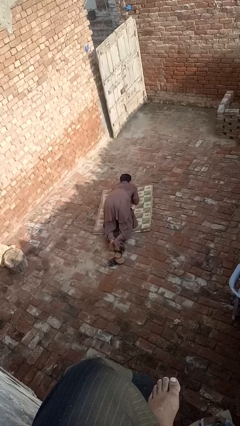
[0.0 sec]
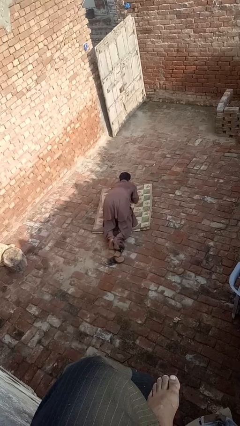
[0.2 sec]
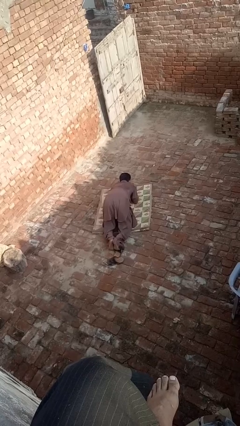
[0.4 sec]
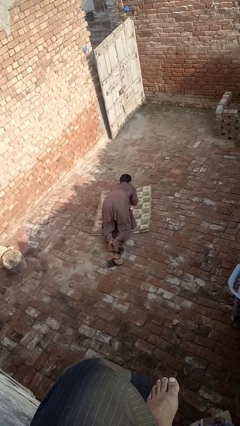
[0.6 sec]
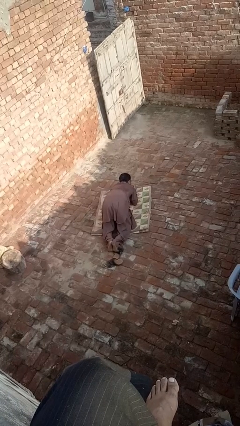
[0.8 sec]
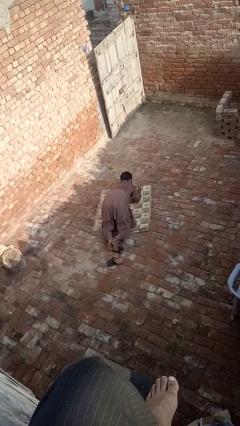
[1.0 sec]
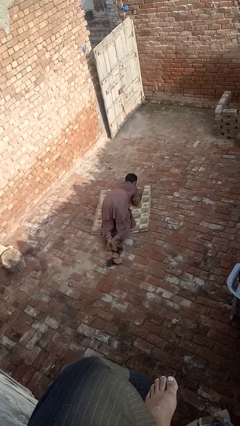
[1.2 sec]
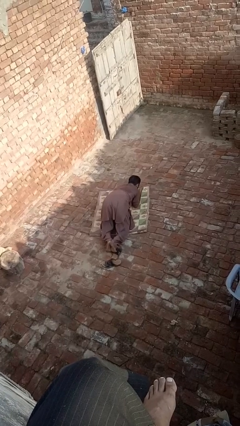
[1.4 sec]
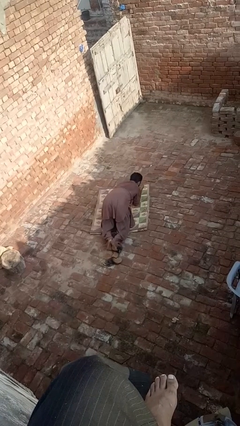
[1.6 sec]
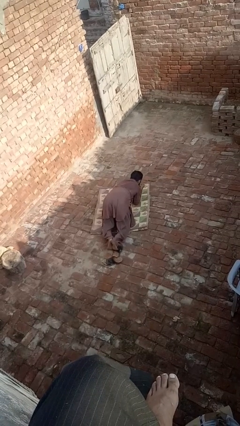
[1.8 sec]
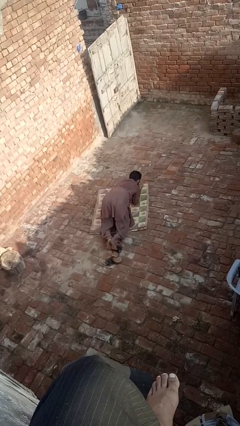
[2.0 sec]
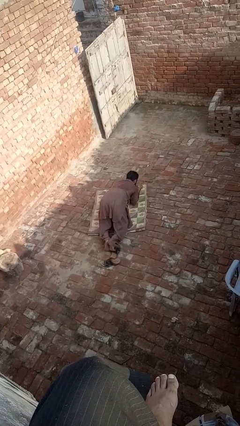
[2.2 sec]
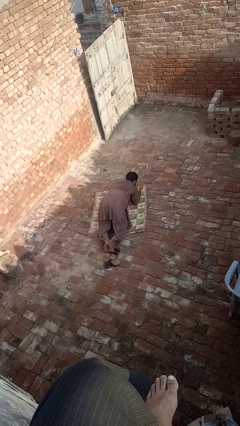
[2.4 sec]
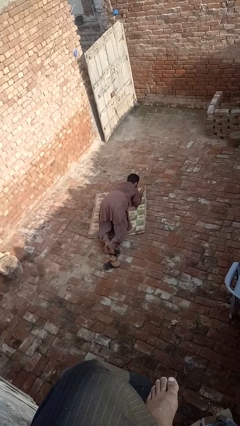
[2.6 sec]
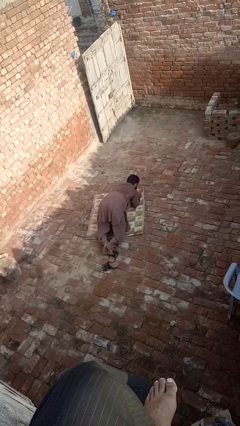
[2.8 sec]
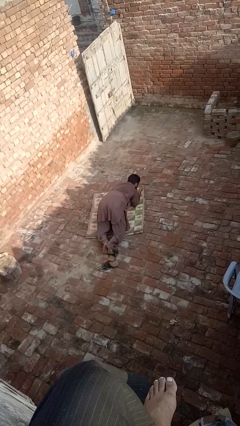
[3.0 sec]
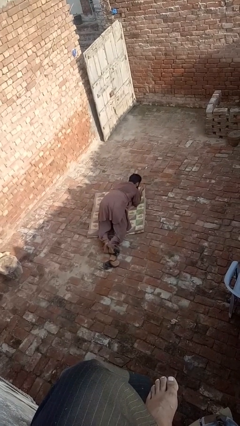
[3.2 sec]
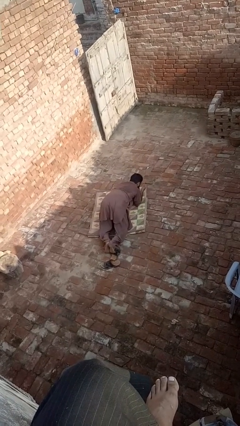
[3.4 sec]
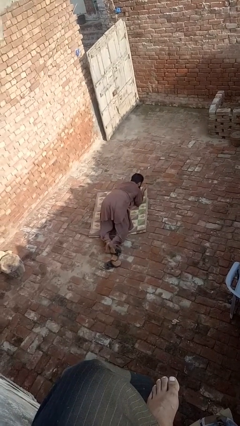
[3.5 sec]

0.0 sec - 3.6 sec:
person crawls

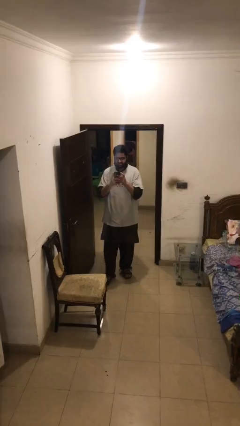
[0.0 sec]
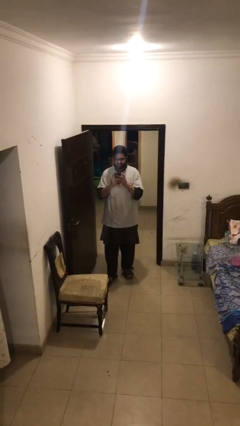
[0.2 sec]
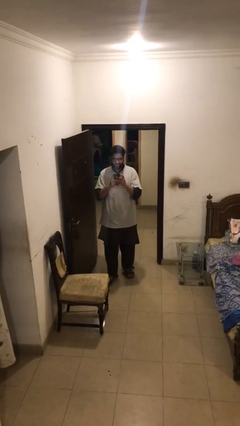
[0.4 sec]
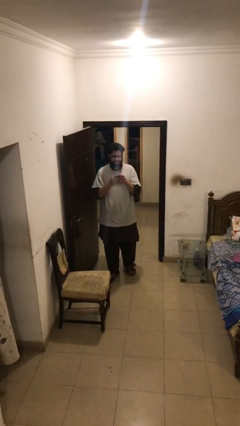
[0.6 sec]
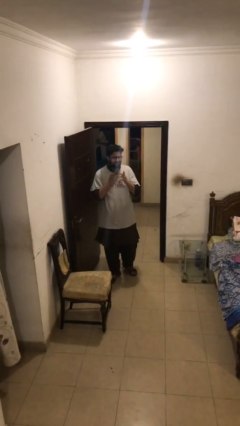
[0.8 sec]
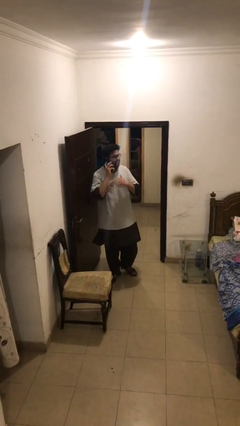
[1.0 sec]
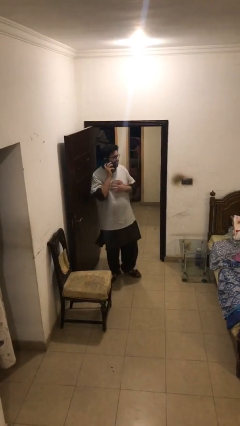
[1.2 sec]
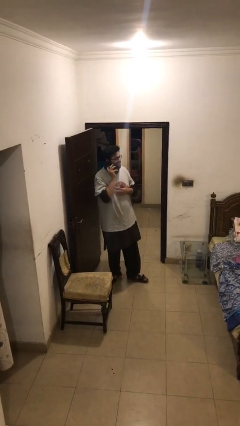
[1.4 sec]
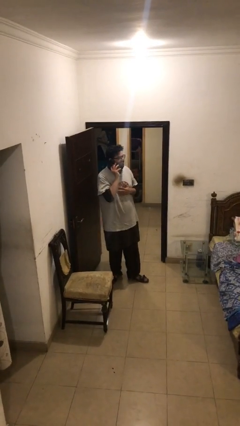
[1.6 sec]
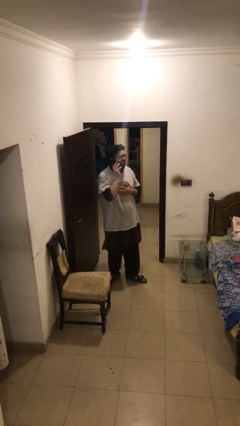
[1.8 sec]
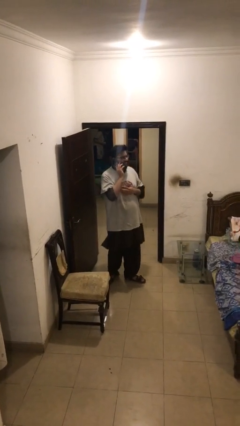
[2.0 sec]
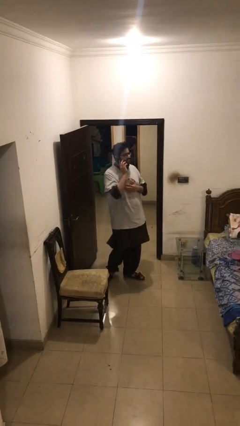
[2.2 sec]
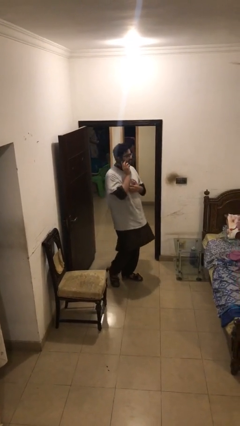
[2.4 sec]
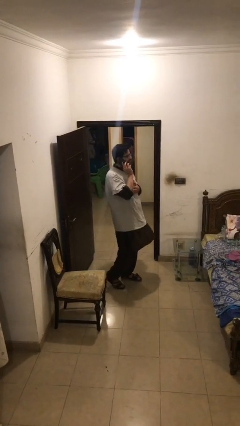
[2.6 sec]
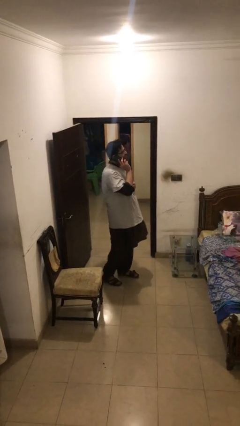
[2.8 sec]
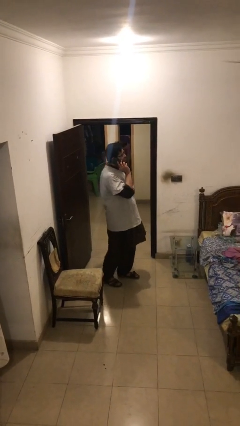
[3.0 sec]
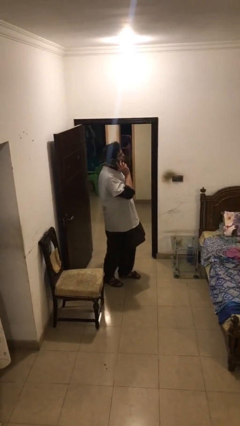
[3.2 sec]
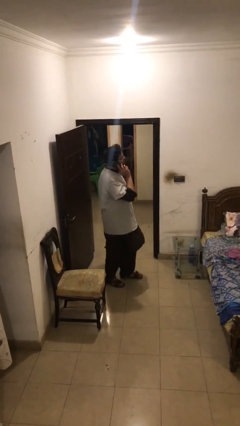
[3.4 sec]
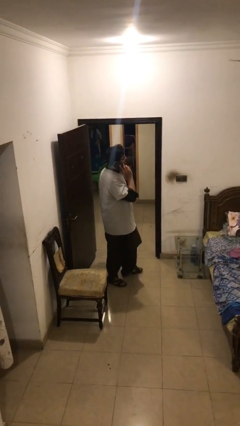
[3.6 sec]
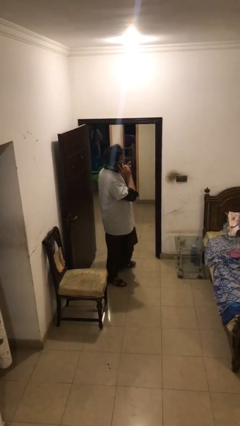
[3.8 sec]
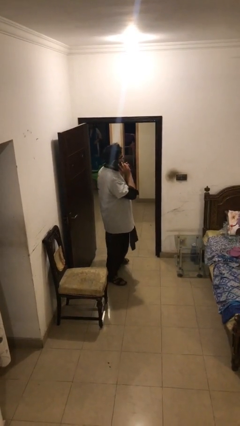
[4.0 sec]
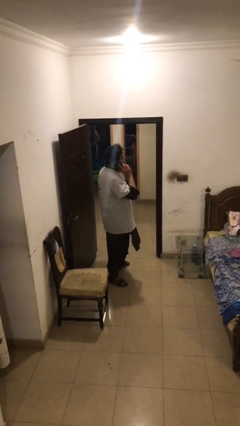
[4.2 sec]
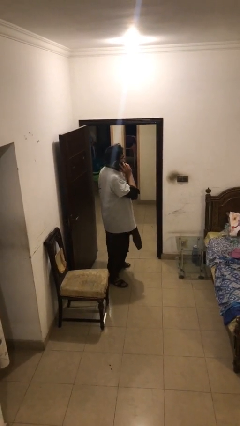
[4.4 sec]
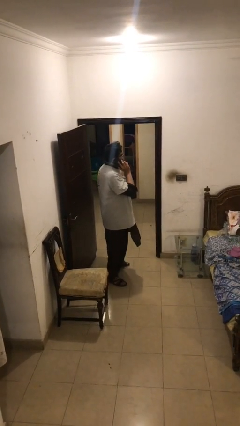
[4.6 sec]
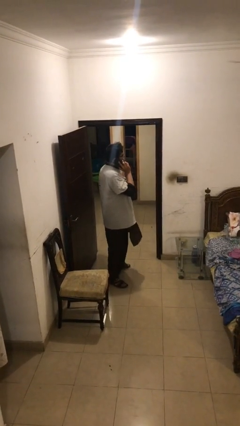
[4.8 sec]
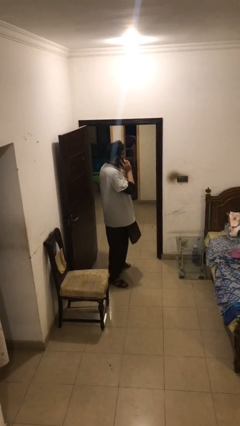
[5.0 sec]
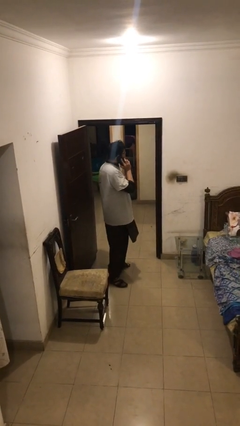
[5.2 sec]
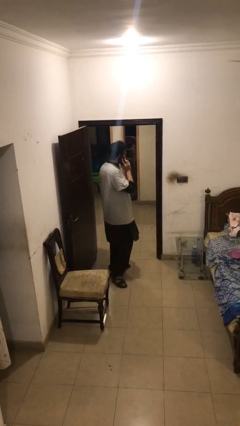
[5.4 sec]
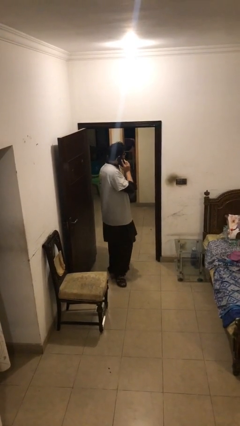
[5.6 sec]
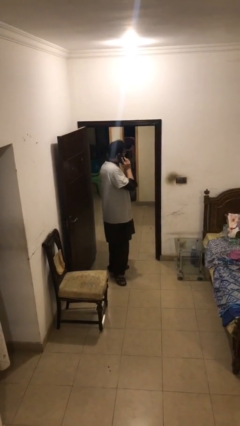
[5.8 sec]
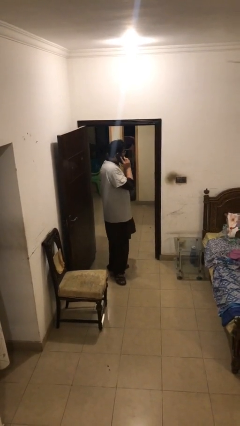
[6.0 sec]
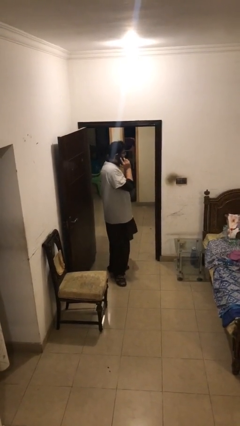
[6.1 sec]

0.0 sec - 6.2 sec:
person talks on phone

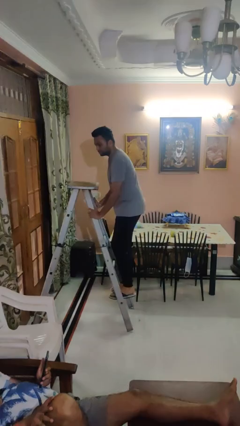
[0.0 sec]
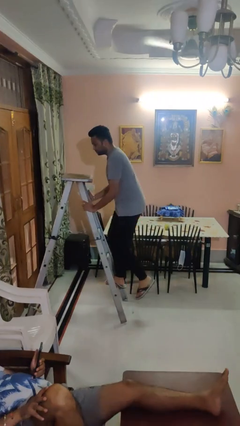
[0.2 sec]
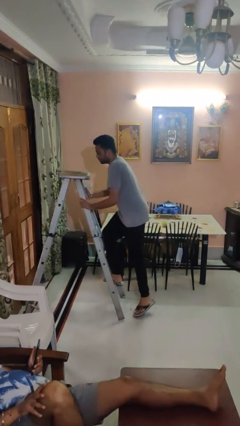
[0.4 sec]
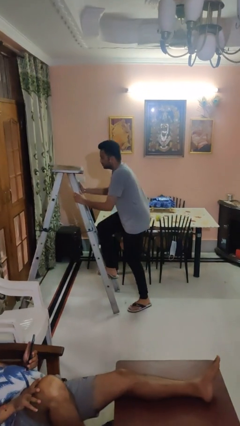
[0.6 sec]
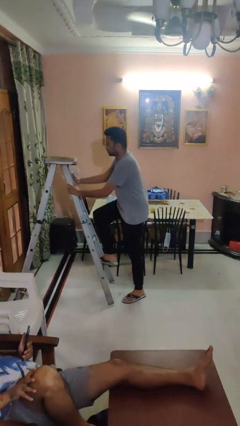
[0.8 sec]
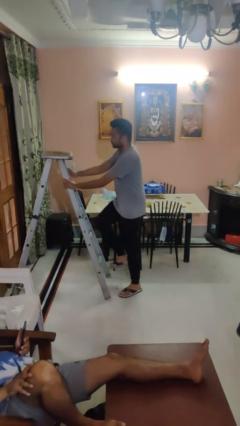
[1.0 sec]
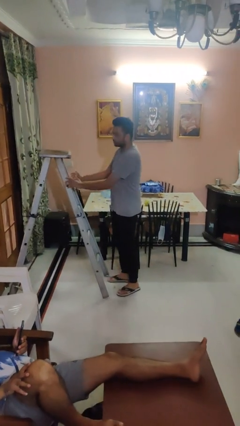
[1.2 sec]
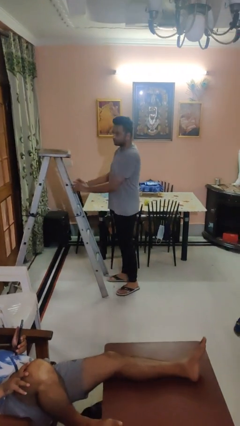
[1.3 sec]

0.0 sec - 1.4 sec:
person climbs down ladder

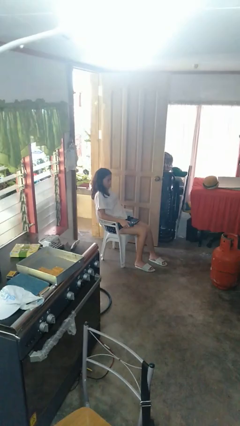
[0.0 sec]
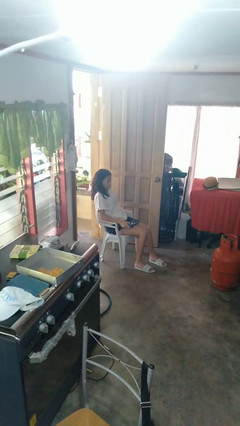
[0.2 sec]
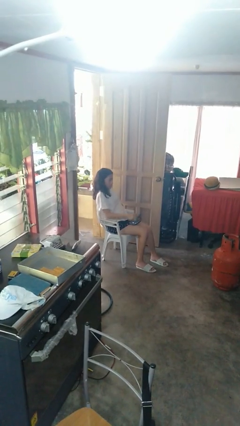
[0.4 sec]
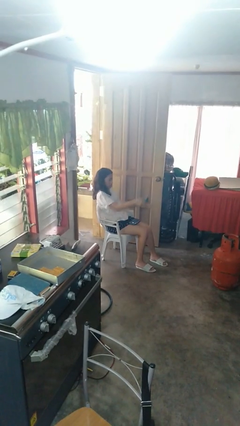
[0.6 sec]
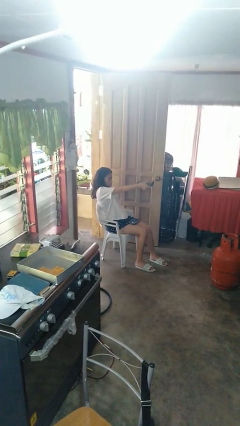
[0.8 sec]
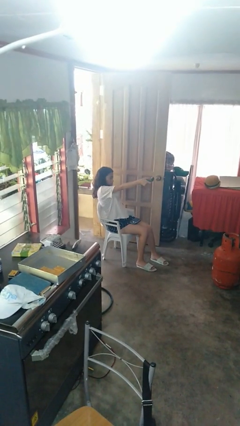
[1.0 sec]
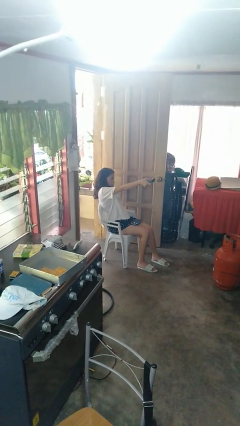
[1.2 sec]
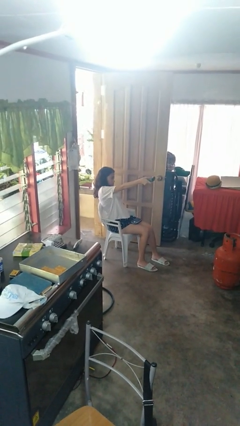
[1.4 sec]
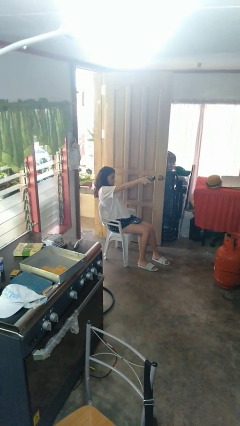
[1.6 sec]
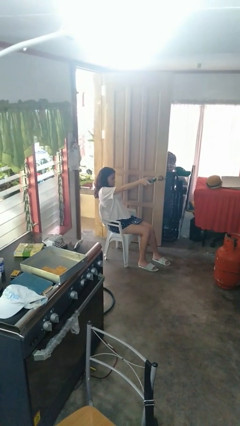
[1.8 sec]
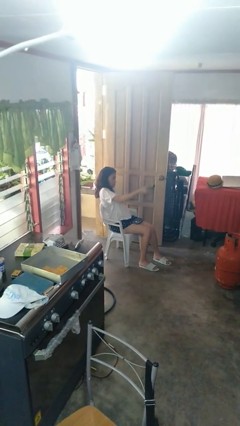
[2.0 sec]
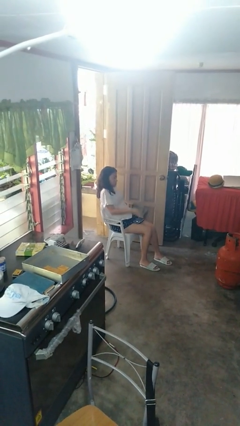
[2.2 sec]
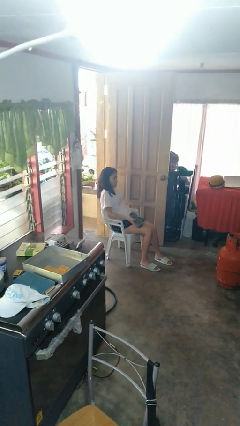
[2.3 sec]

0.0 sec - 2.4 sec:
person uses television remote

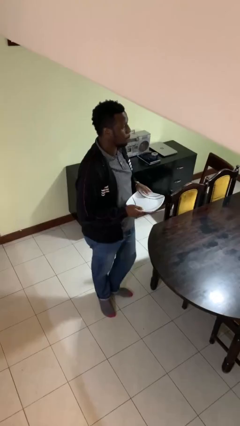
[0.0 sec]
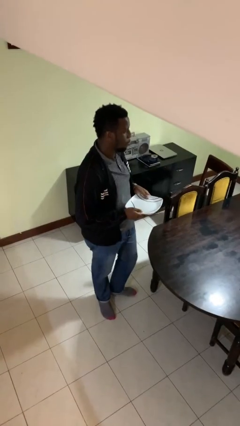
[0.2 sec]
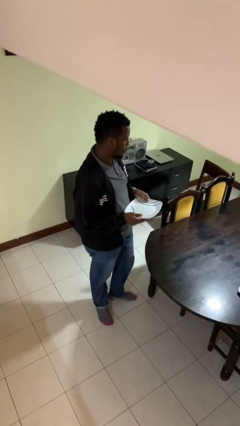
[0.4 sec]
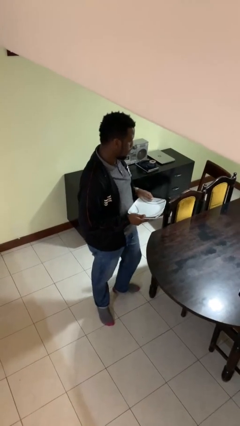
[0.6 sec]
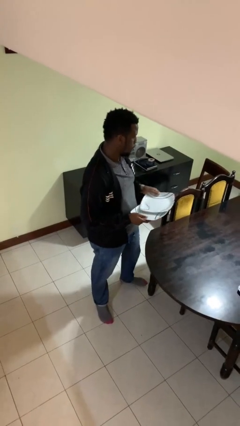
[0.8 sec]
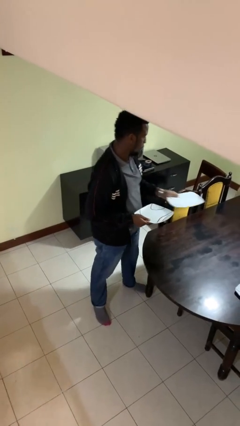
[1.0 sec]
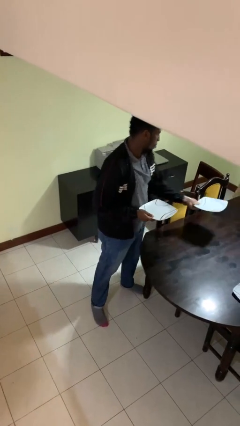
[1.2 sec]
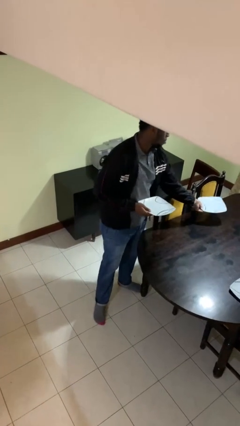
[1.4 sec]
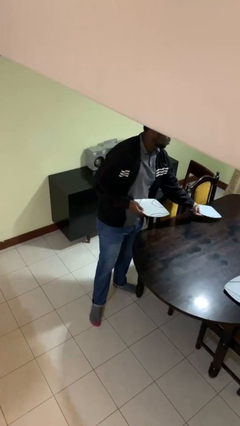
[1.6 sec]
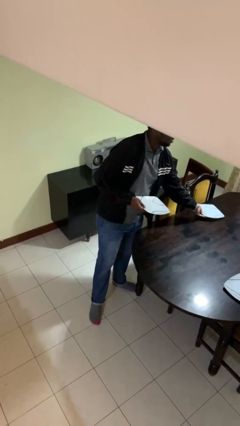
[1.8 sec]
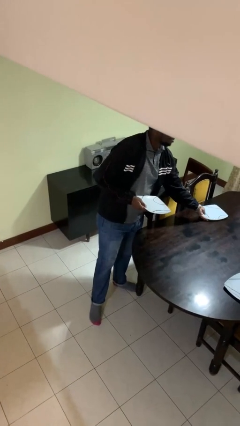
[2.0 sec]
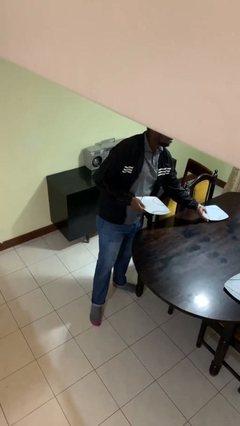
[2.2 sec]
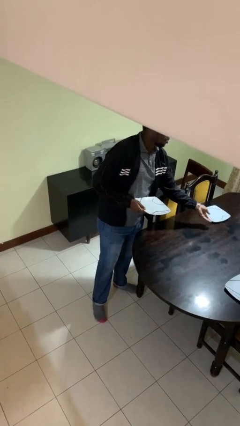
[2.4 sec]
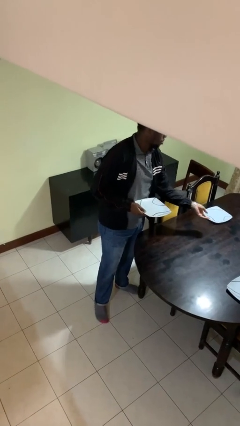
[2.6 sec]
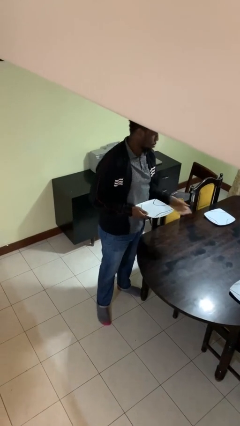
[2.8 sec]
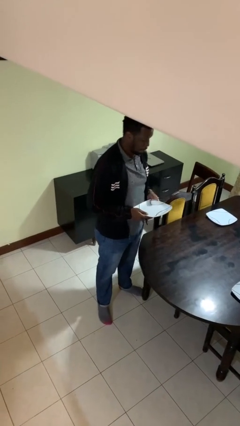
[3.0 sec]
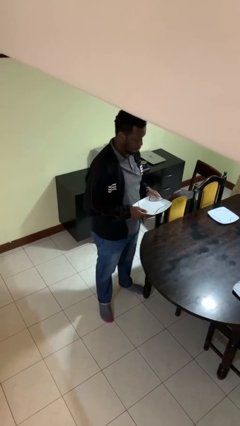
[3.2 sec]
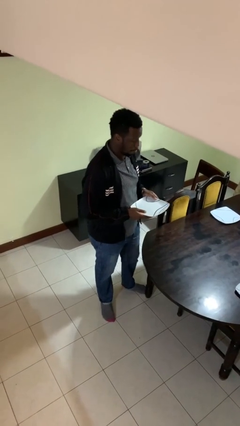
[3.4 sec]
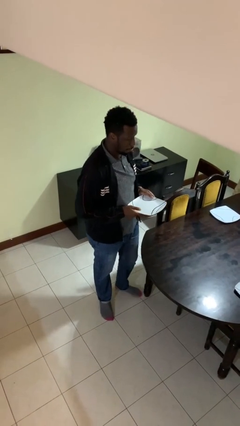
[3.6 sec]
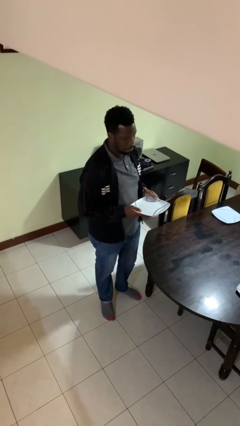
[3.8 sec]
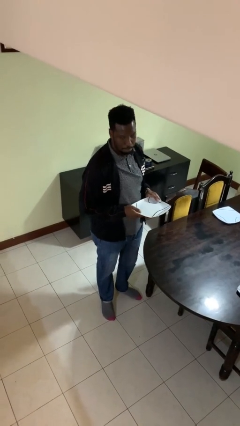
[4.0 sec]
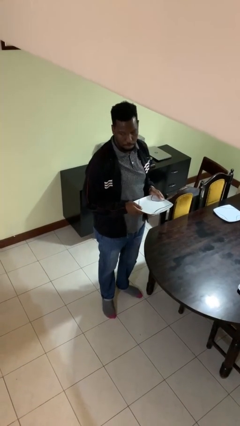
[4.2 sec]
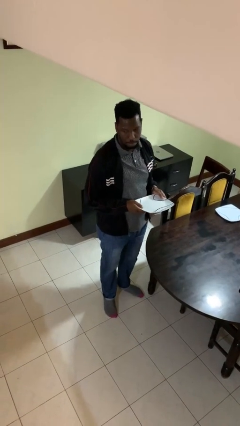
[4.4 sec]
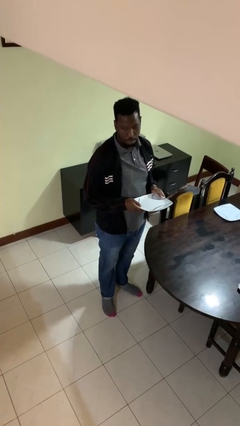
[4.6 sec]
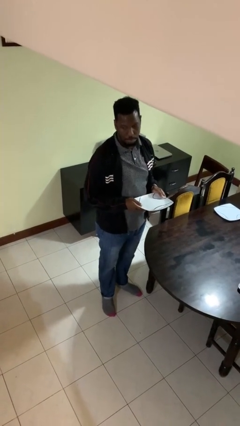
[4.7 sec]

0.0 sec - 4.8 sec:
person sets table
